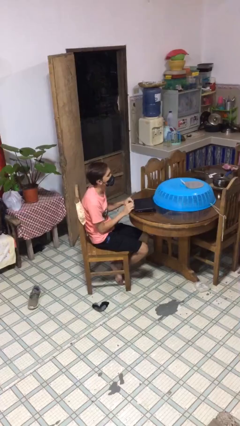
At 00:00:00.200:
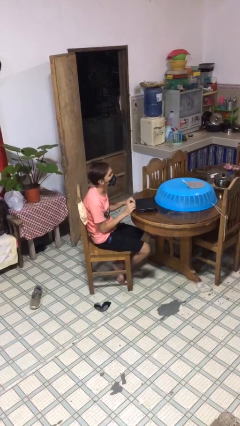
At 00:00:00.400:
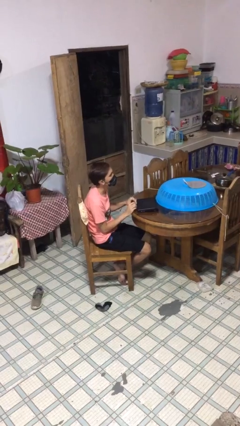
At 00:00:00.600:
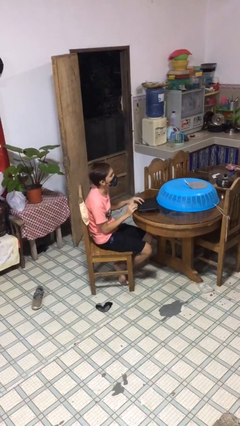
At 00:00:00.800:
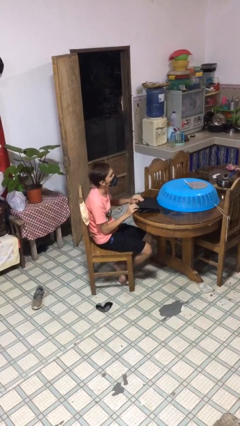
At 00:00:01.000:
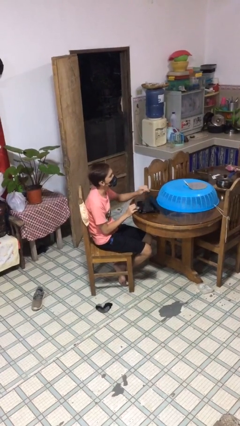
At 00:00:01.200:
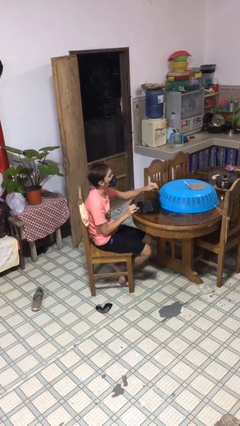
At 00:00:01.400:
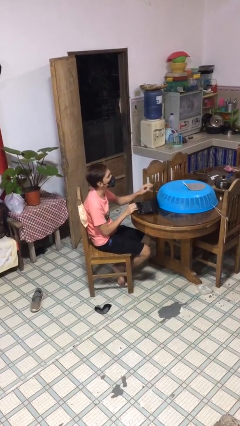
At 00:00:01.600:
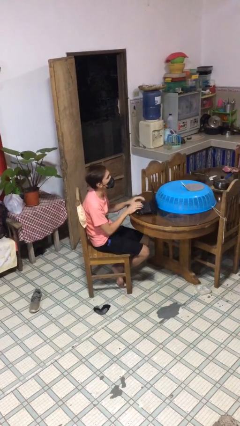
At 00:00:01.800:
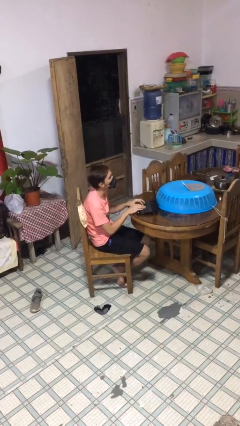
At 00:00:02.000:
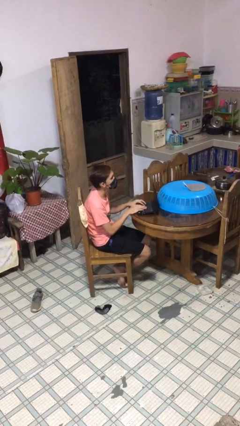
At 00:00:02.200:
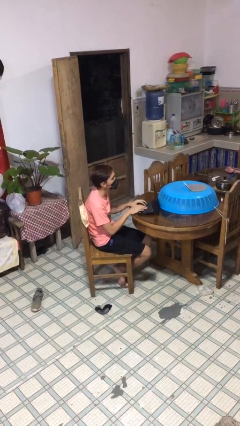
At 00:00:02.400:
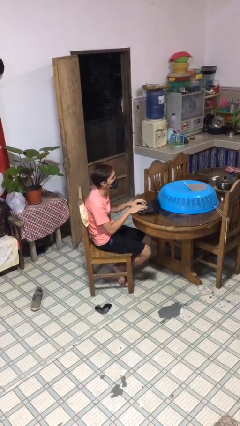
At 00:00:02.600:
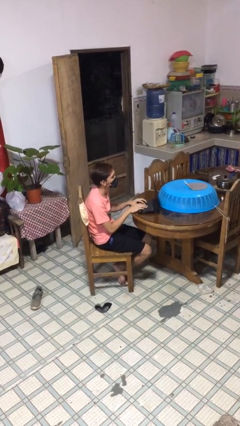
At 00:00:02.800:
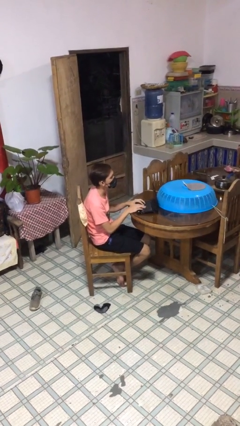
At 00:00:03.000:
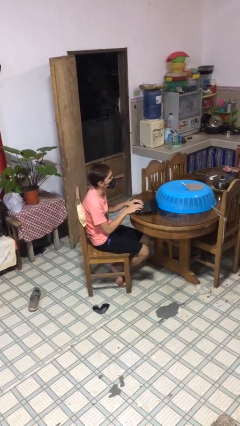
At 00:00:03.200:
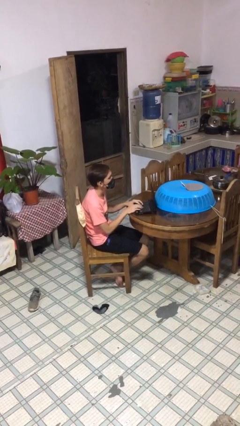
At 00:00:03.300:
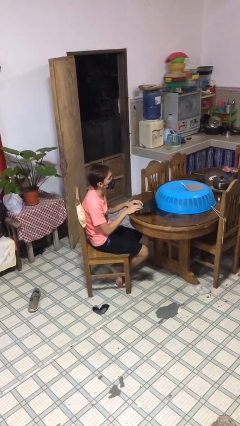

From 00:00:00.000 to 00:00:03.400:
person interacts with laptop

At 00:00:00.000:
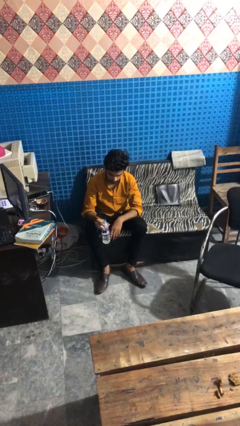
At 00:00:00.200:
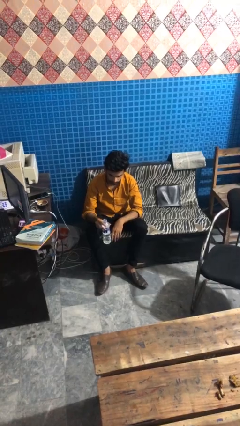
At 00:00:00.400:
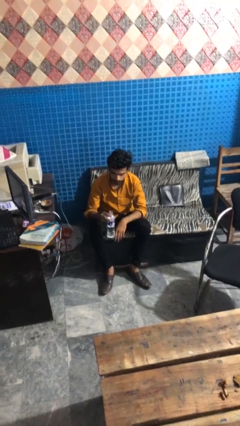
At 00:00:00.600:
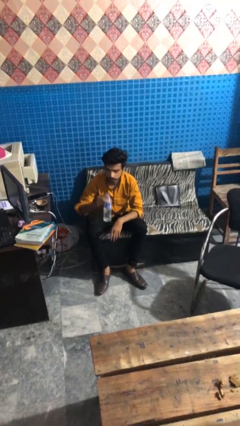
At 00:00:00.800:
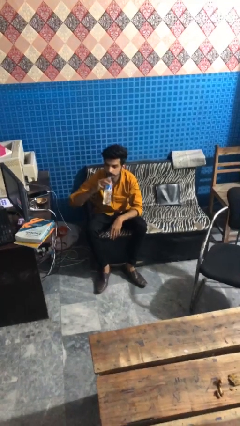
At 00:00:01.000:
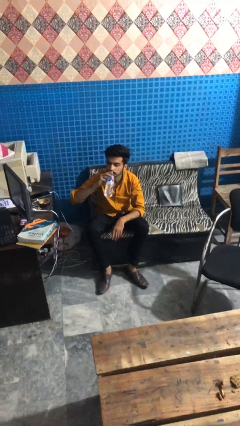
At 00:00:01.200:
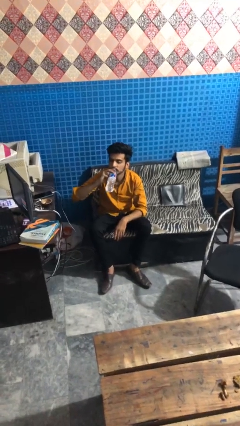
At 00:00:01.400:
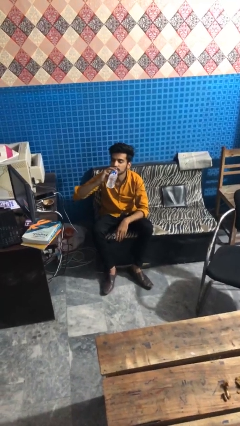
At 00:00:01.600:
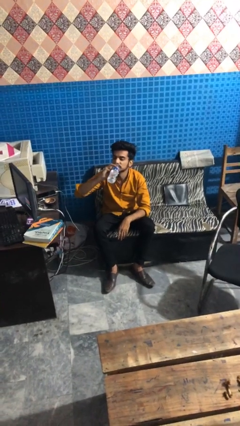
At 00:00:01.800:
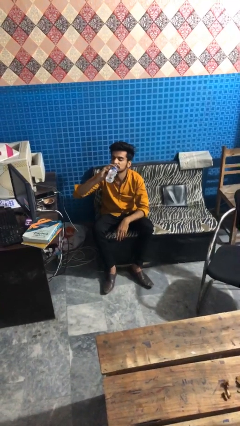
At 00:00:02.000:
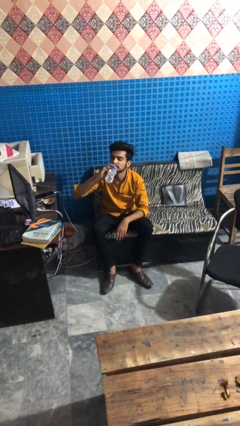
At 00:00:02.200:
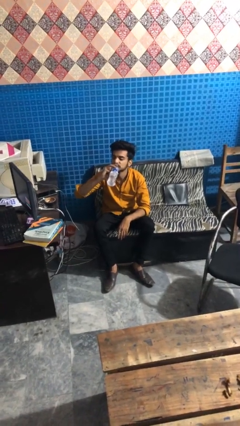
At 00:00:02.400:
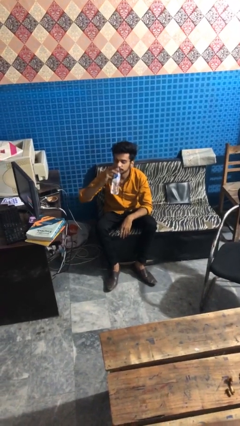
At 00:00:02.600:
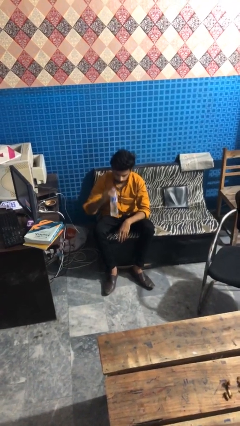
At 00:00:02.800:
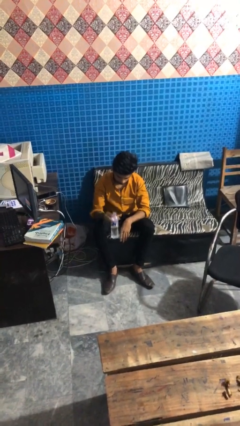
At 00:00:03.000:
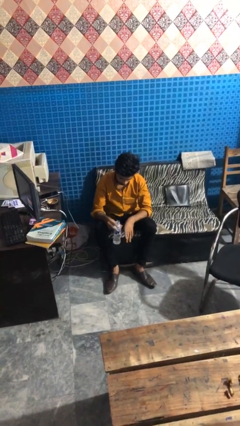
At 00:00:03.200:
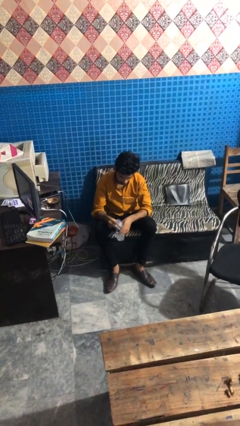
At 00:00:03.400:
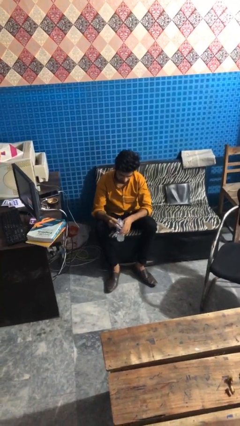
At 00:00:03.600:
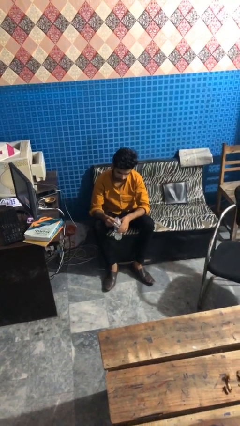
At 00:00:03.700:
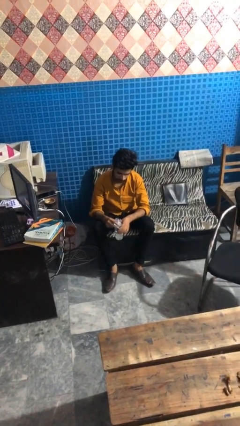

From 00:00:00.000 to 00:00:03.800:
person drinks from bottle

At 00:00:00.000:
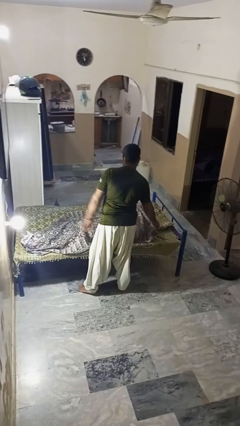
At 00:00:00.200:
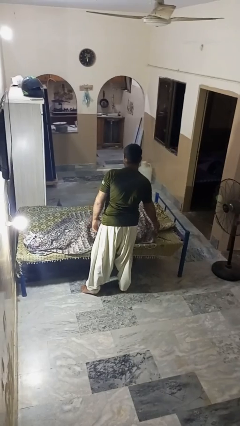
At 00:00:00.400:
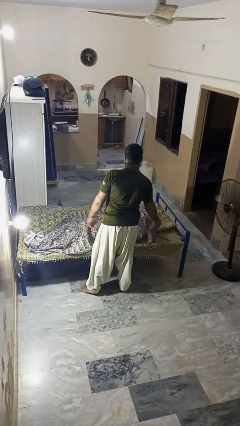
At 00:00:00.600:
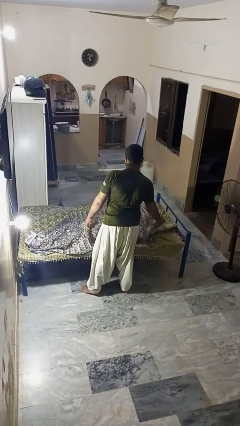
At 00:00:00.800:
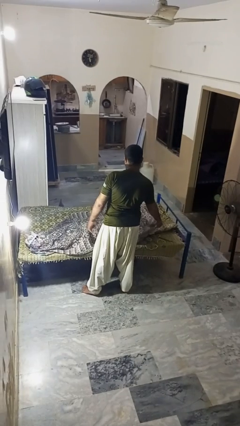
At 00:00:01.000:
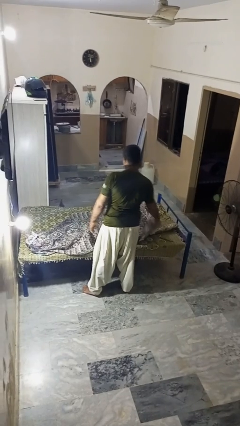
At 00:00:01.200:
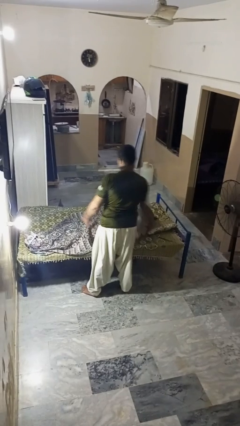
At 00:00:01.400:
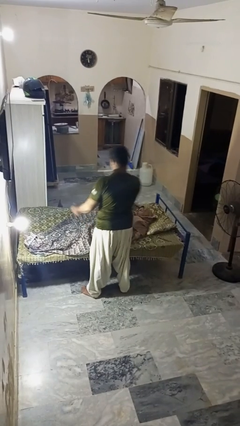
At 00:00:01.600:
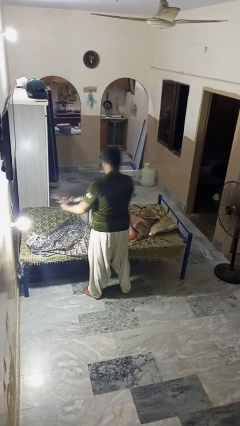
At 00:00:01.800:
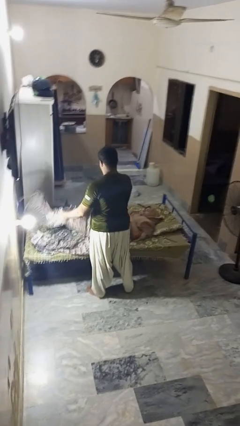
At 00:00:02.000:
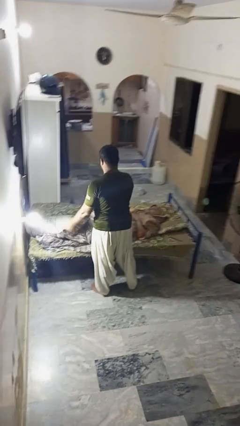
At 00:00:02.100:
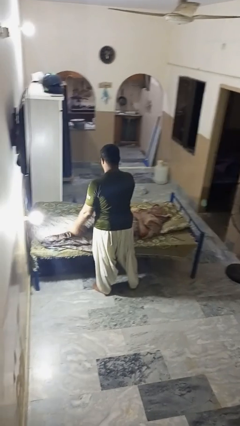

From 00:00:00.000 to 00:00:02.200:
person uncovers friend with blanket

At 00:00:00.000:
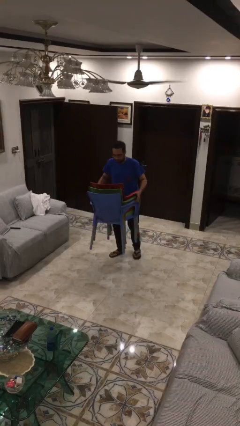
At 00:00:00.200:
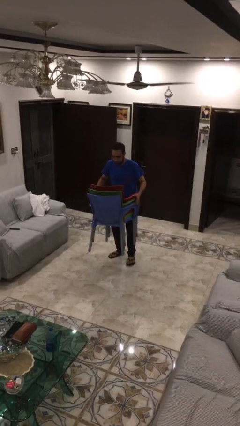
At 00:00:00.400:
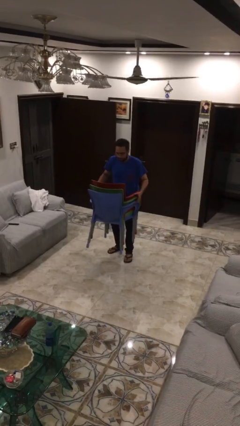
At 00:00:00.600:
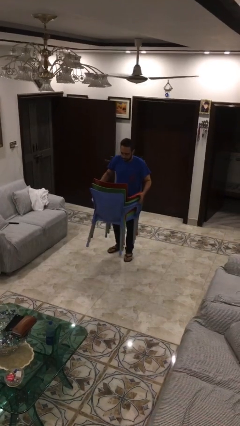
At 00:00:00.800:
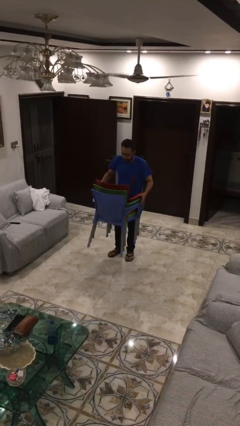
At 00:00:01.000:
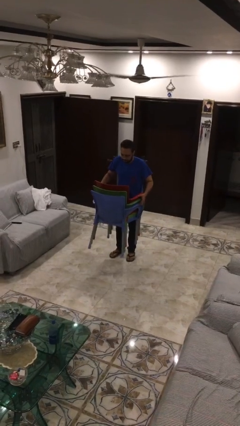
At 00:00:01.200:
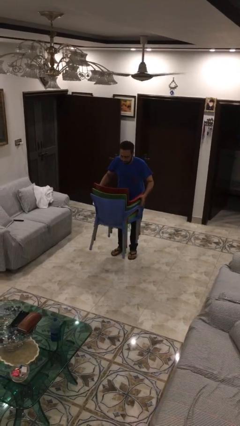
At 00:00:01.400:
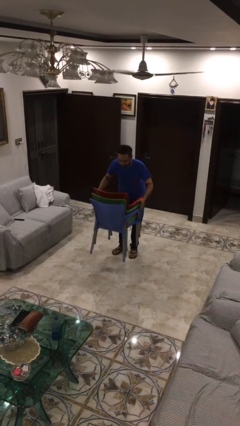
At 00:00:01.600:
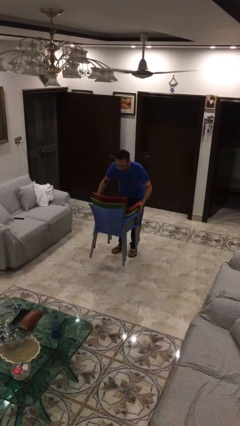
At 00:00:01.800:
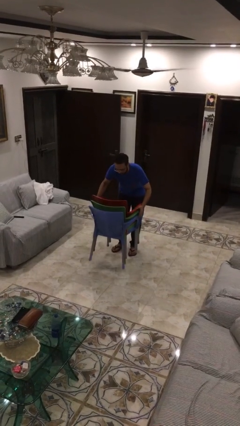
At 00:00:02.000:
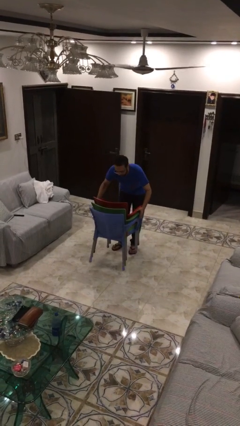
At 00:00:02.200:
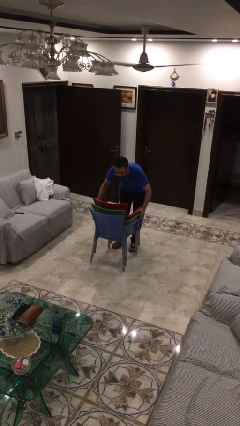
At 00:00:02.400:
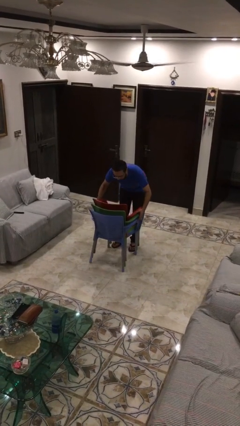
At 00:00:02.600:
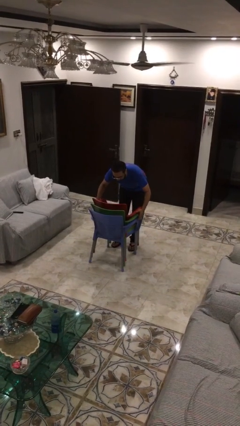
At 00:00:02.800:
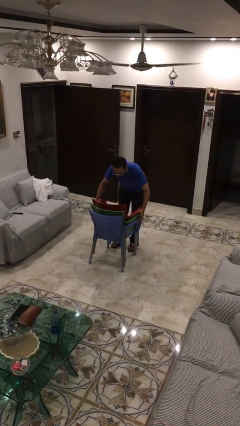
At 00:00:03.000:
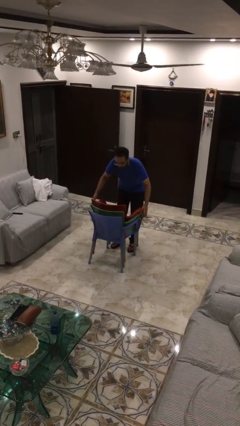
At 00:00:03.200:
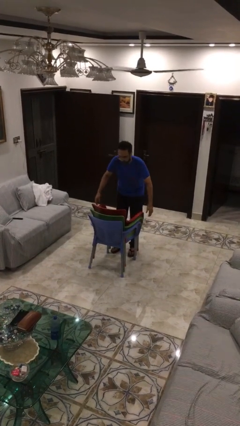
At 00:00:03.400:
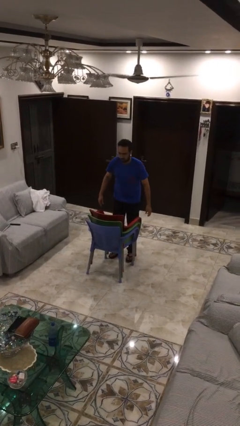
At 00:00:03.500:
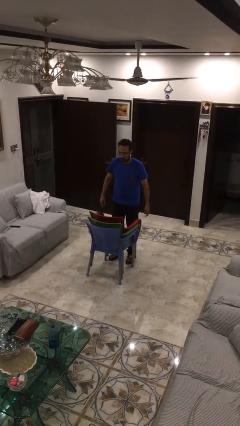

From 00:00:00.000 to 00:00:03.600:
person puts down object on floor

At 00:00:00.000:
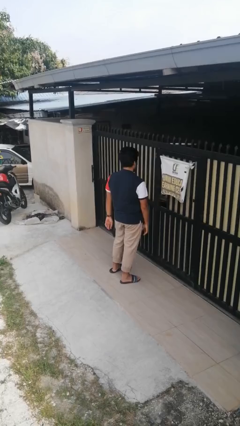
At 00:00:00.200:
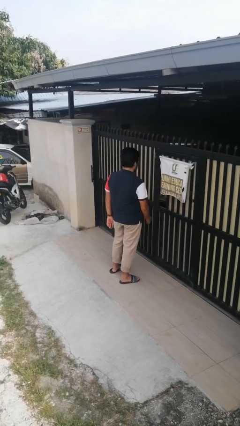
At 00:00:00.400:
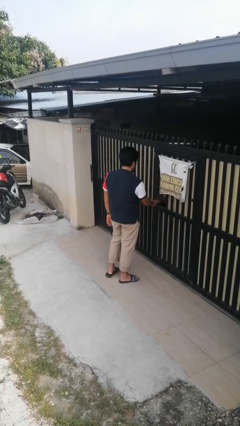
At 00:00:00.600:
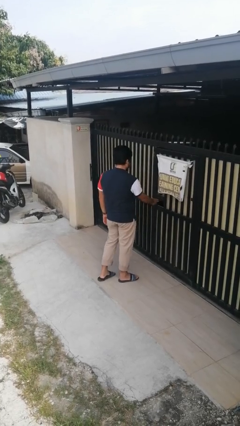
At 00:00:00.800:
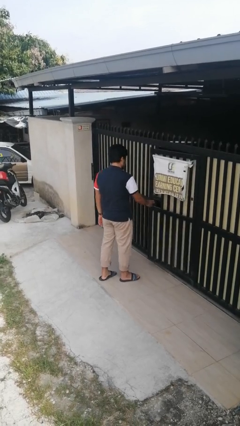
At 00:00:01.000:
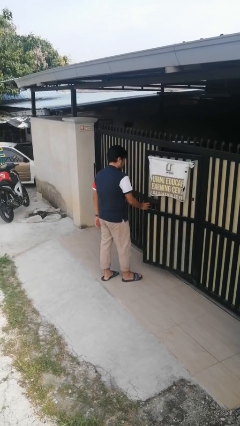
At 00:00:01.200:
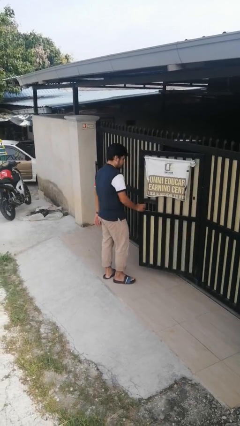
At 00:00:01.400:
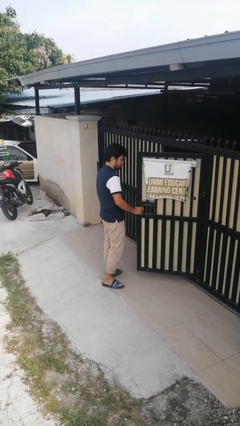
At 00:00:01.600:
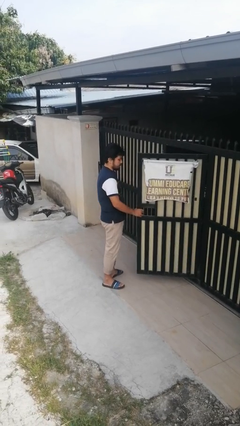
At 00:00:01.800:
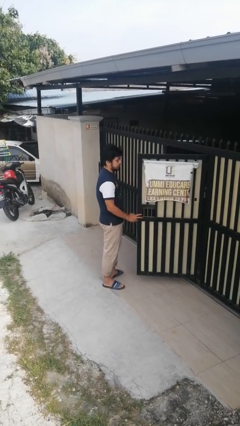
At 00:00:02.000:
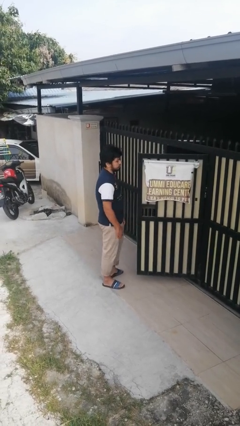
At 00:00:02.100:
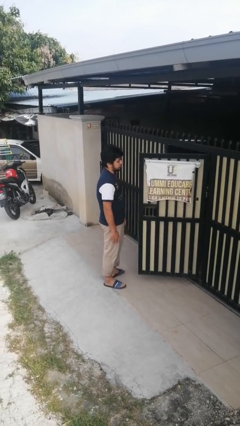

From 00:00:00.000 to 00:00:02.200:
person opens gate

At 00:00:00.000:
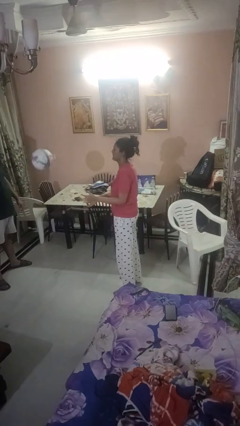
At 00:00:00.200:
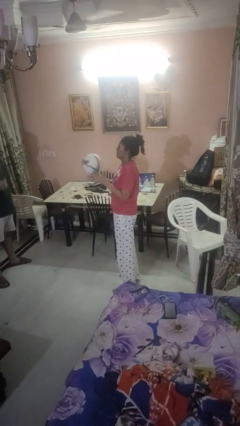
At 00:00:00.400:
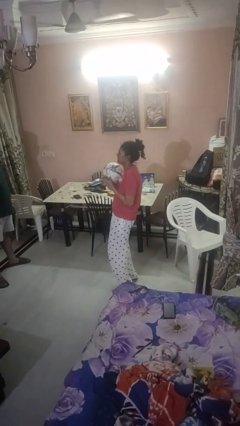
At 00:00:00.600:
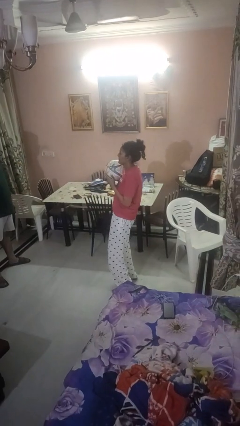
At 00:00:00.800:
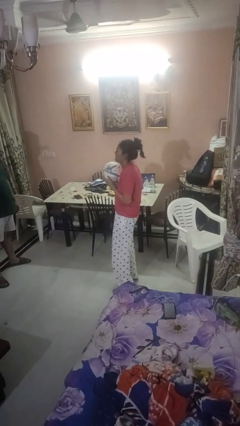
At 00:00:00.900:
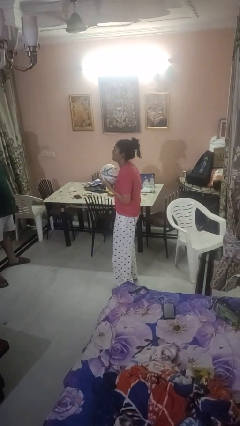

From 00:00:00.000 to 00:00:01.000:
person catches object from person

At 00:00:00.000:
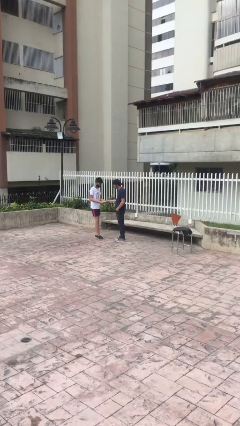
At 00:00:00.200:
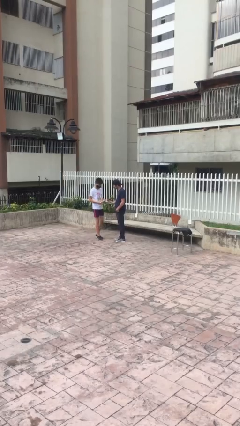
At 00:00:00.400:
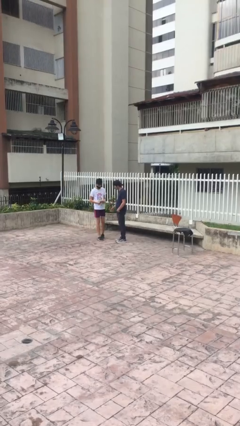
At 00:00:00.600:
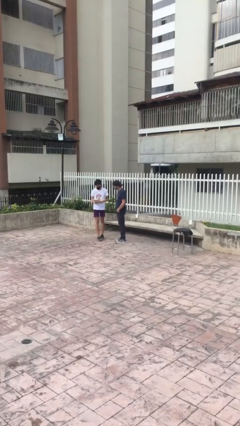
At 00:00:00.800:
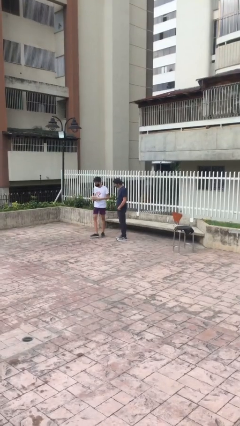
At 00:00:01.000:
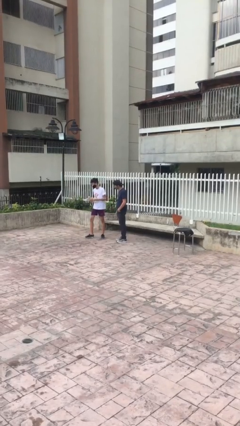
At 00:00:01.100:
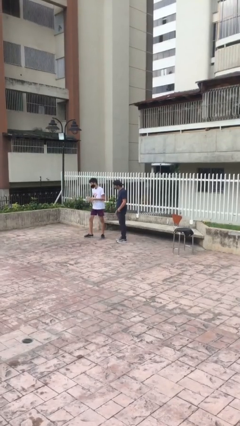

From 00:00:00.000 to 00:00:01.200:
person transfers object to person
